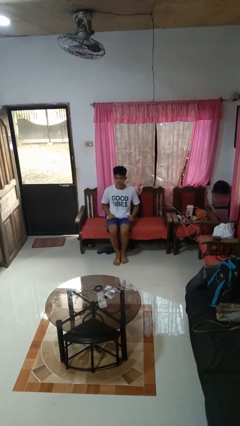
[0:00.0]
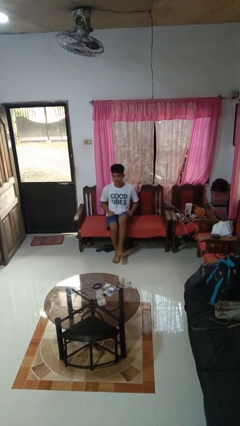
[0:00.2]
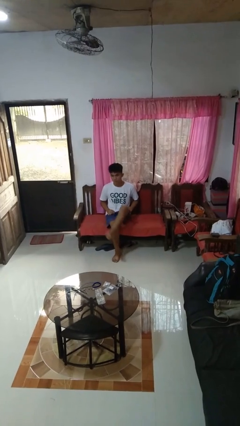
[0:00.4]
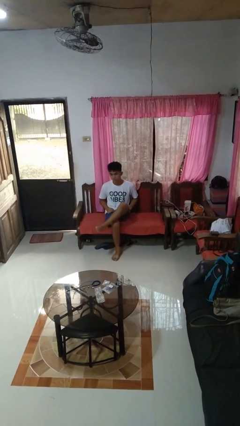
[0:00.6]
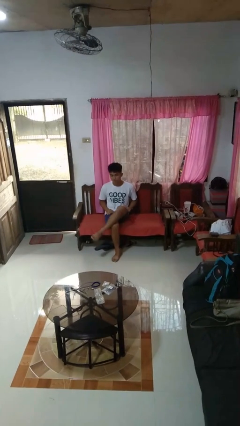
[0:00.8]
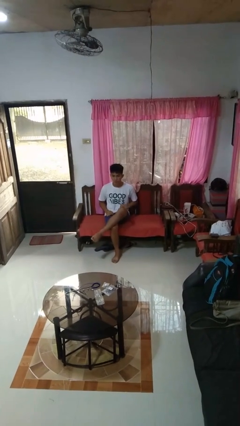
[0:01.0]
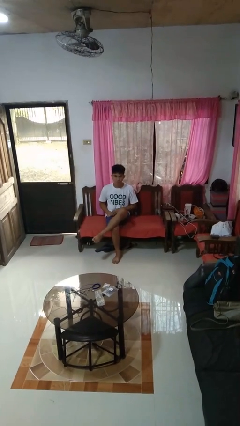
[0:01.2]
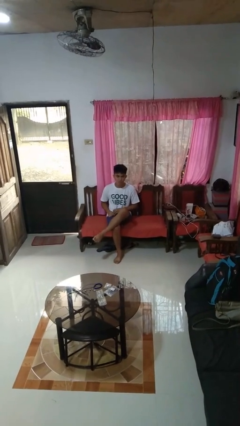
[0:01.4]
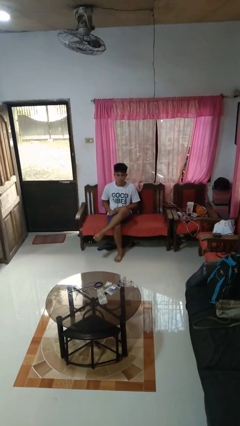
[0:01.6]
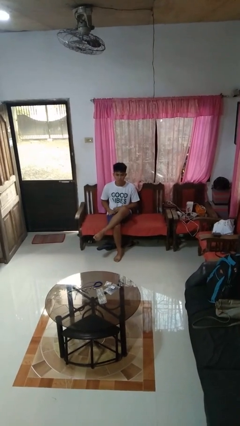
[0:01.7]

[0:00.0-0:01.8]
person crosses legs

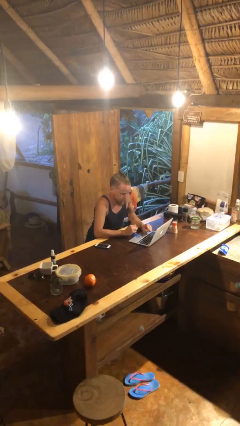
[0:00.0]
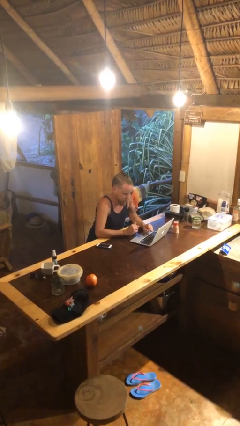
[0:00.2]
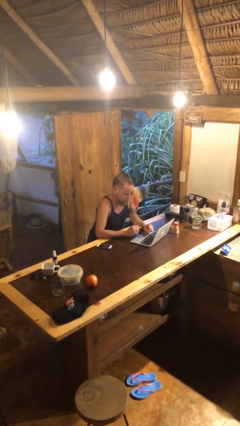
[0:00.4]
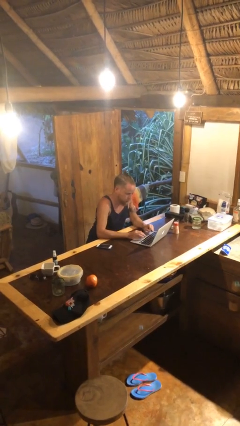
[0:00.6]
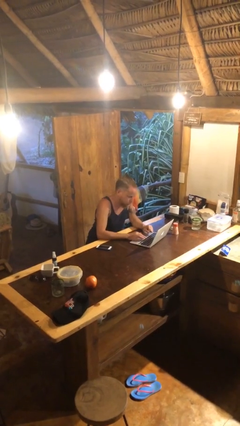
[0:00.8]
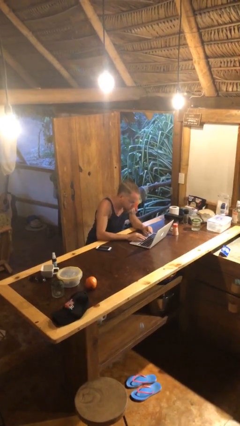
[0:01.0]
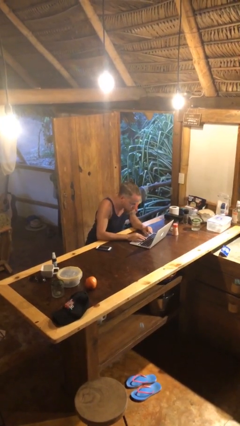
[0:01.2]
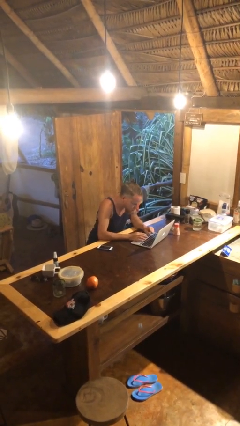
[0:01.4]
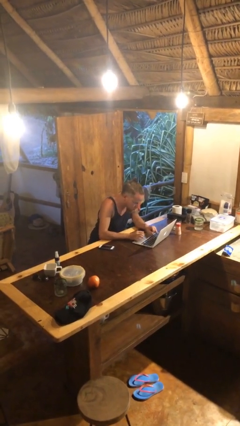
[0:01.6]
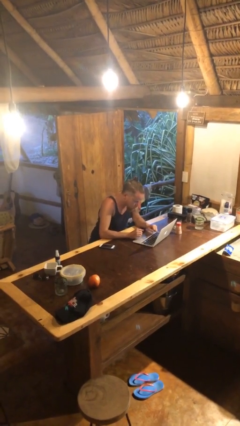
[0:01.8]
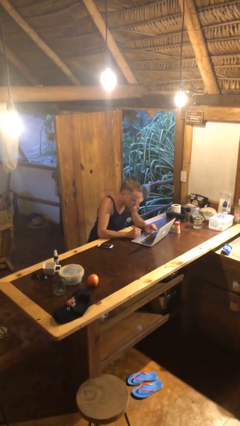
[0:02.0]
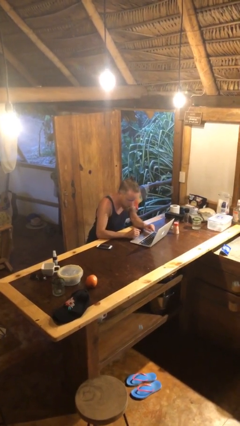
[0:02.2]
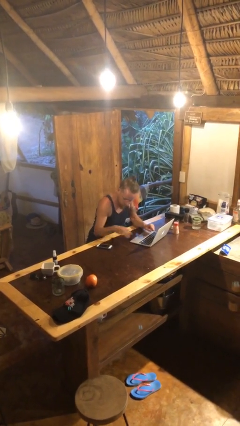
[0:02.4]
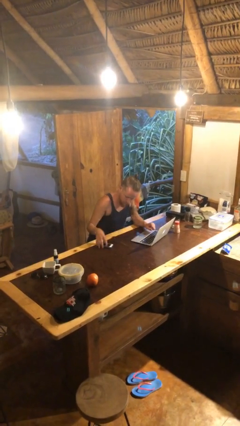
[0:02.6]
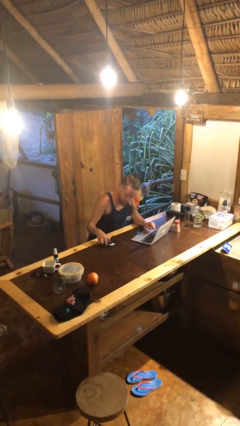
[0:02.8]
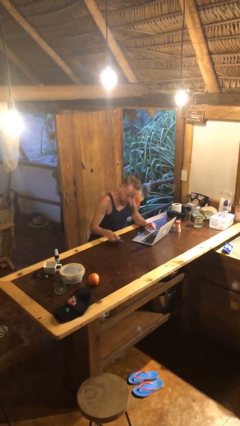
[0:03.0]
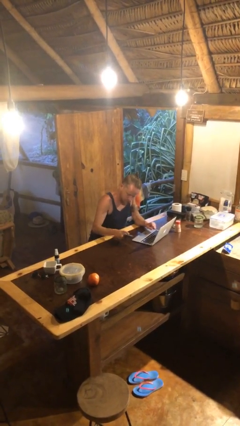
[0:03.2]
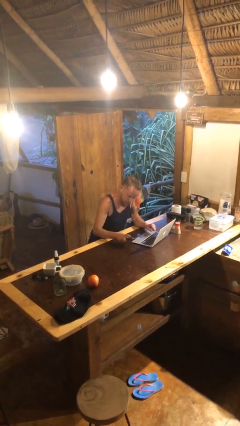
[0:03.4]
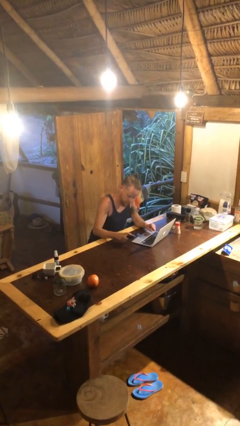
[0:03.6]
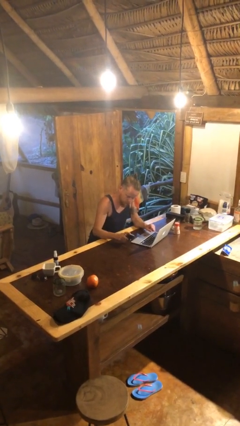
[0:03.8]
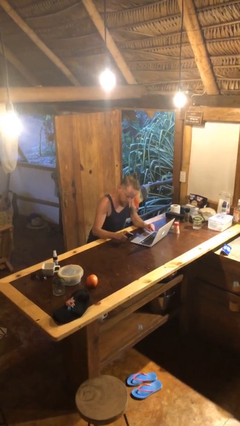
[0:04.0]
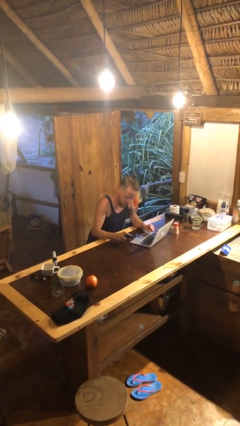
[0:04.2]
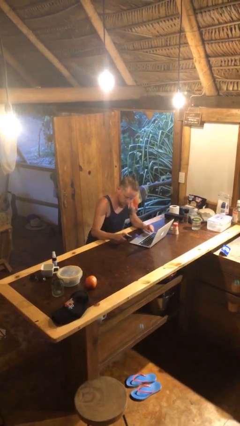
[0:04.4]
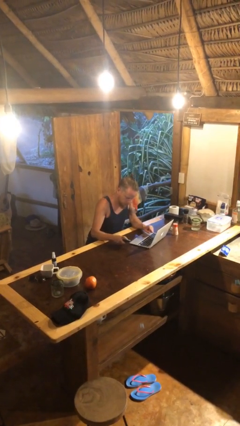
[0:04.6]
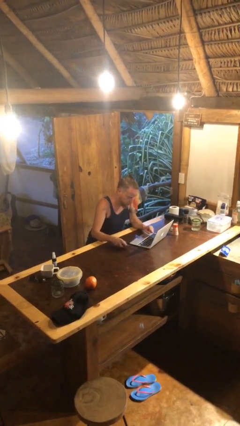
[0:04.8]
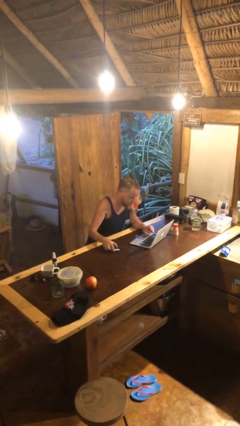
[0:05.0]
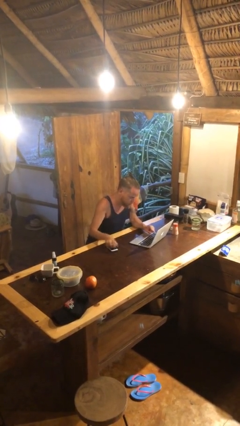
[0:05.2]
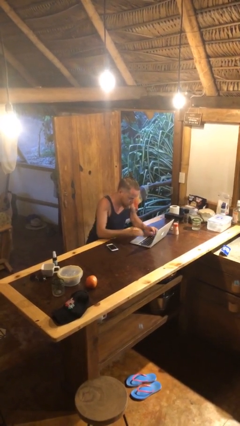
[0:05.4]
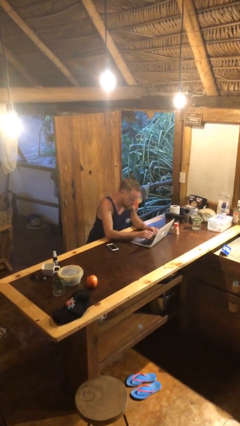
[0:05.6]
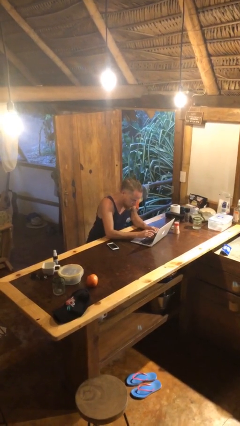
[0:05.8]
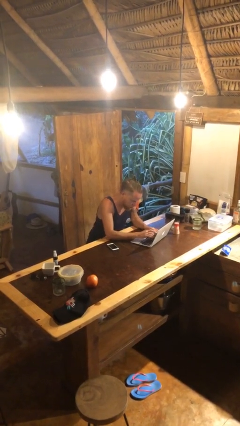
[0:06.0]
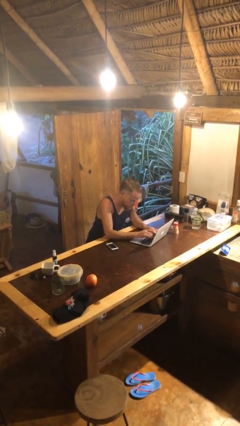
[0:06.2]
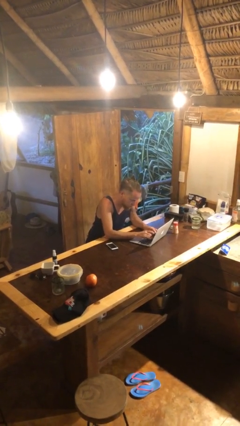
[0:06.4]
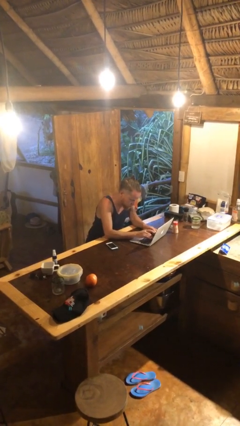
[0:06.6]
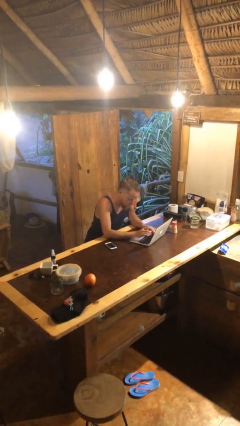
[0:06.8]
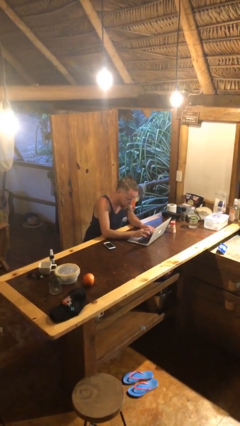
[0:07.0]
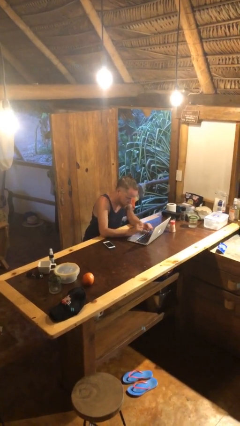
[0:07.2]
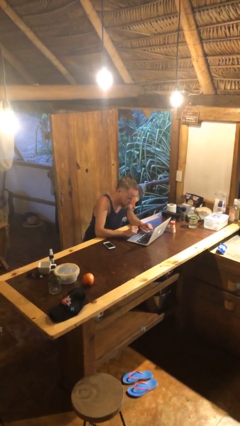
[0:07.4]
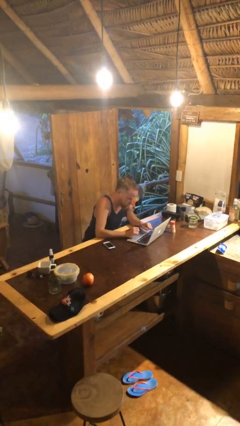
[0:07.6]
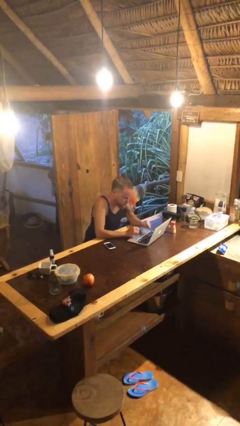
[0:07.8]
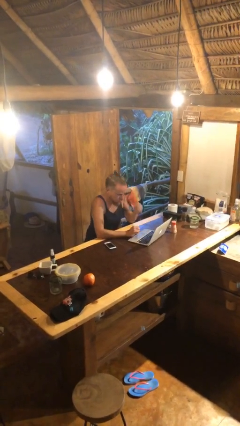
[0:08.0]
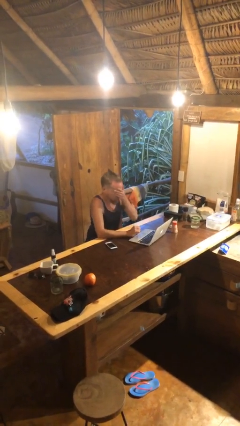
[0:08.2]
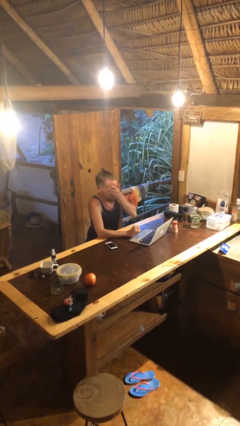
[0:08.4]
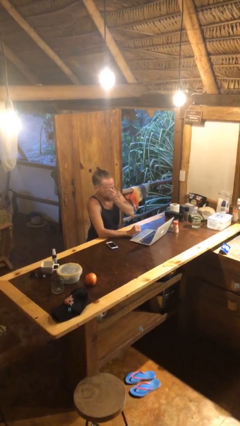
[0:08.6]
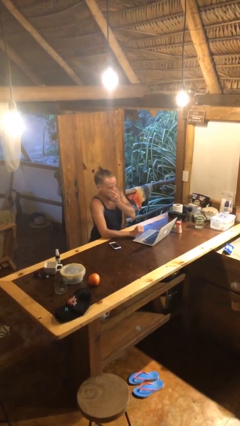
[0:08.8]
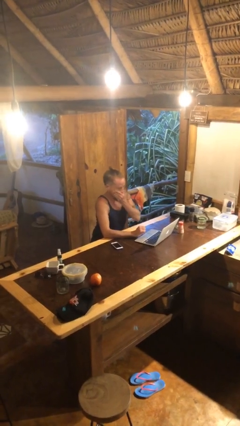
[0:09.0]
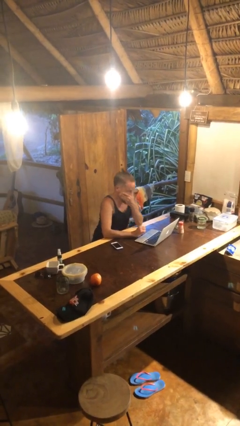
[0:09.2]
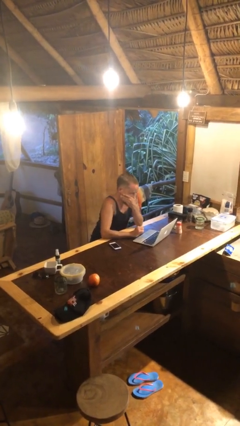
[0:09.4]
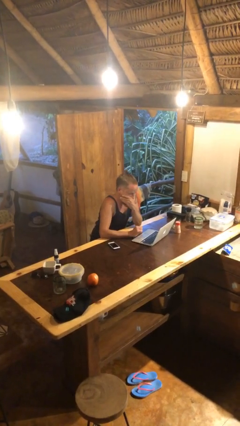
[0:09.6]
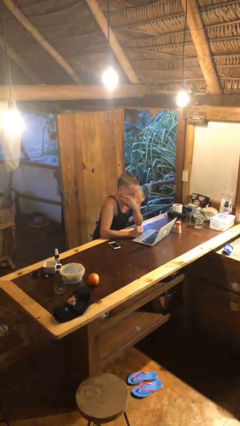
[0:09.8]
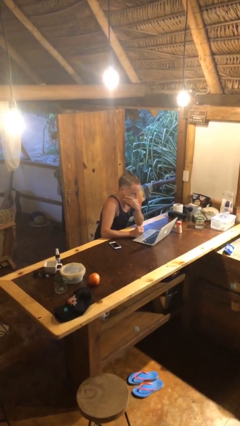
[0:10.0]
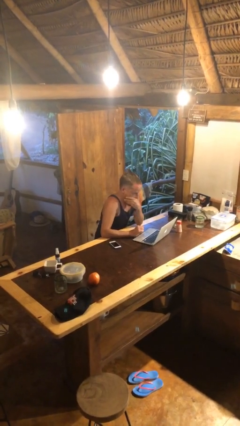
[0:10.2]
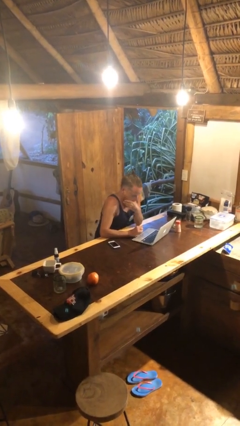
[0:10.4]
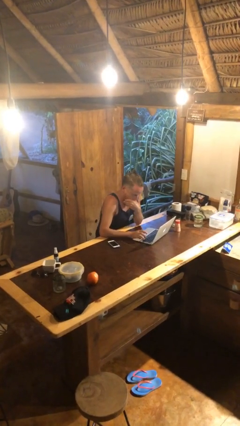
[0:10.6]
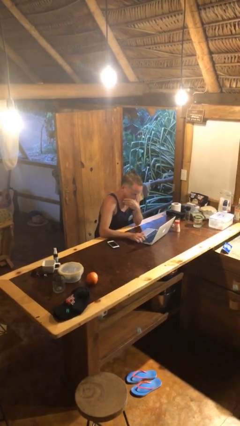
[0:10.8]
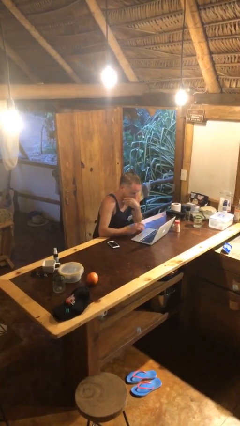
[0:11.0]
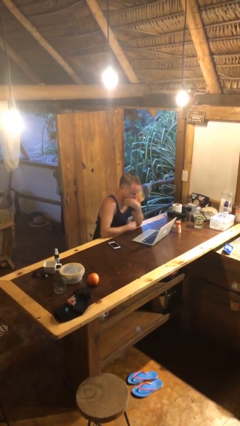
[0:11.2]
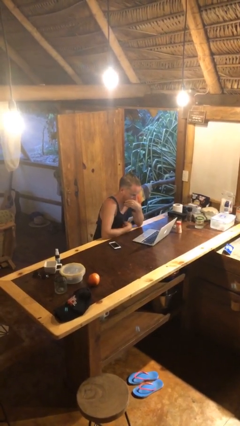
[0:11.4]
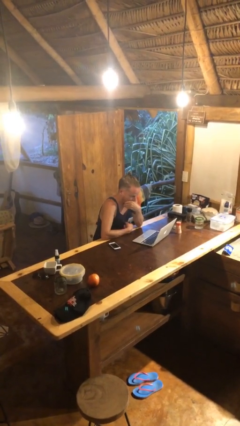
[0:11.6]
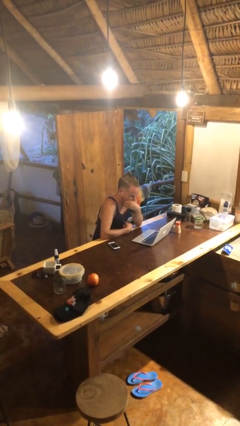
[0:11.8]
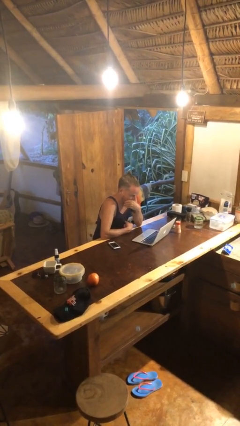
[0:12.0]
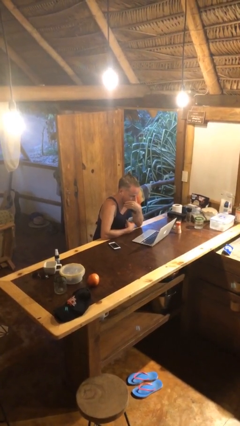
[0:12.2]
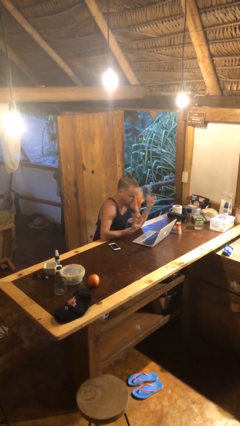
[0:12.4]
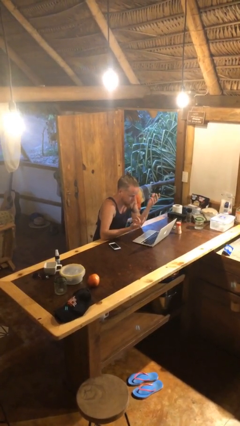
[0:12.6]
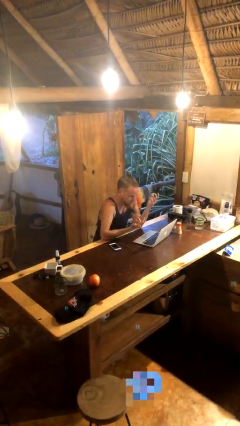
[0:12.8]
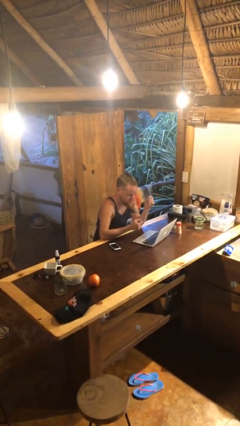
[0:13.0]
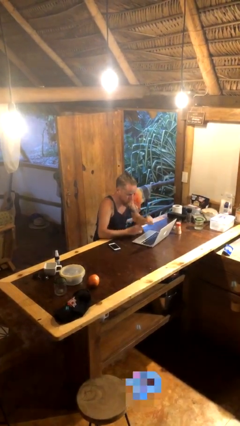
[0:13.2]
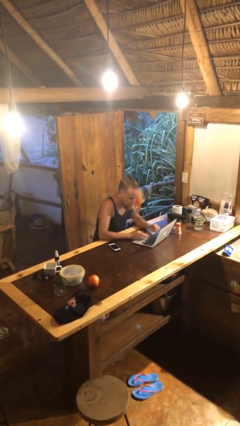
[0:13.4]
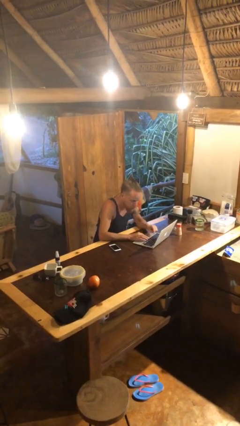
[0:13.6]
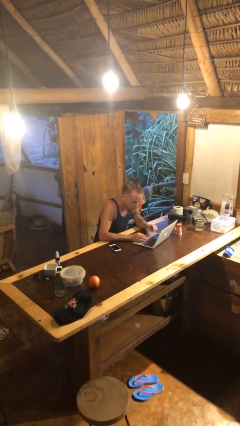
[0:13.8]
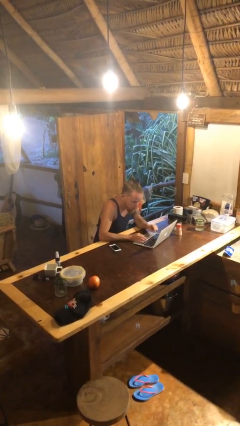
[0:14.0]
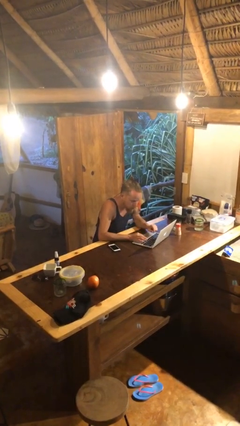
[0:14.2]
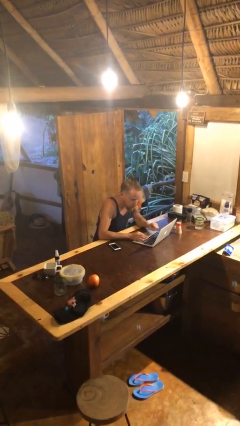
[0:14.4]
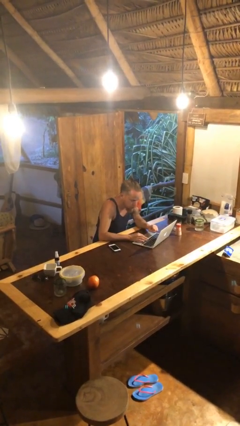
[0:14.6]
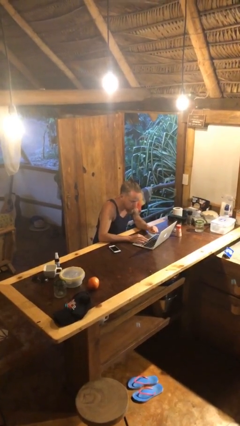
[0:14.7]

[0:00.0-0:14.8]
person interacts with laptop

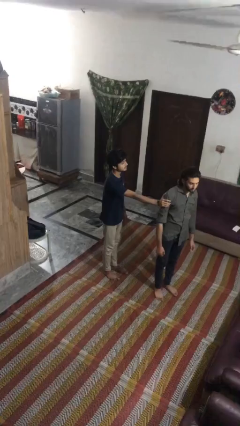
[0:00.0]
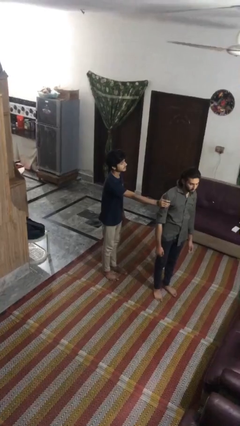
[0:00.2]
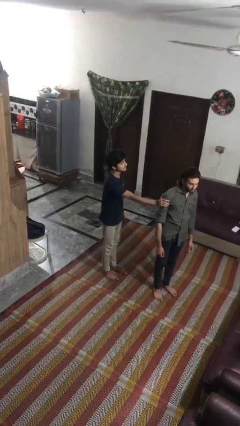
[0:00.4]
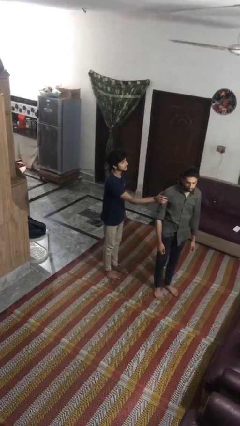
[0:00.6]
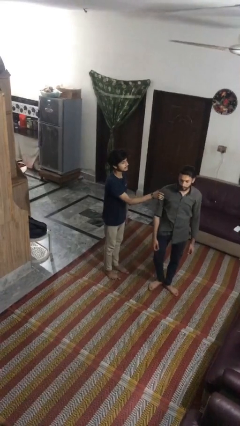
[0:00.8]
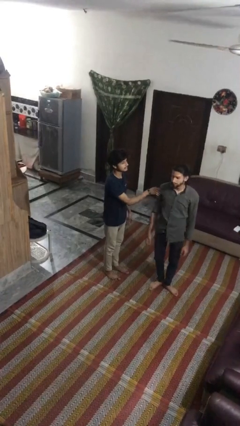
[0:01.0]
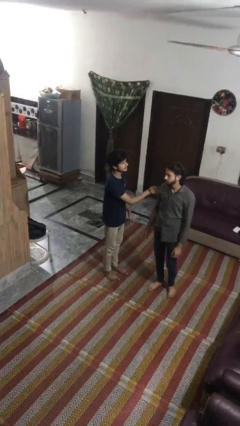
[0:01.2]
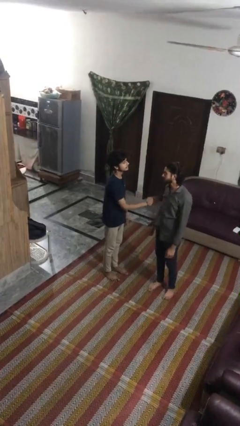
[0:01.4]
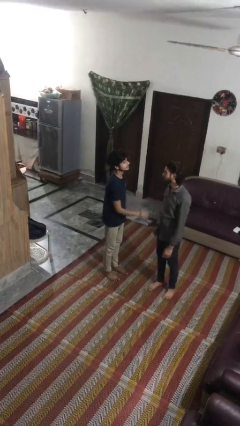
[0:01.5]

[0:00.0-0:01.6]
person spins person around
